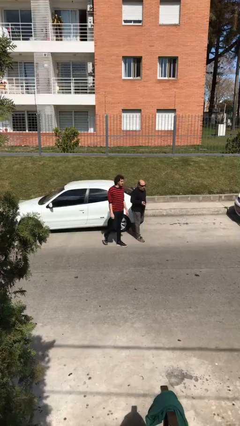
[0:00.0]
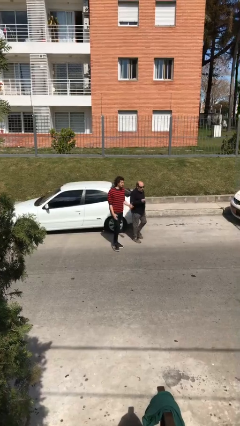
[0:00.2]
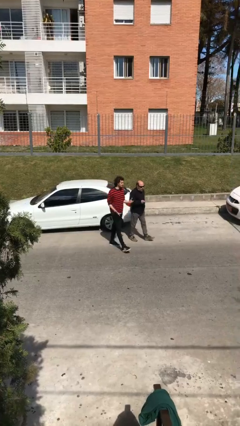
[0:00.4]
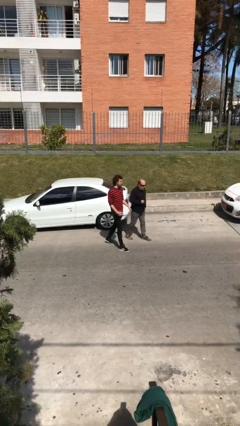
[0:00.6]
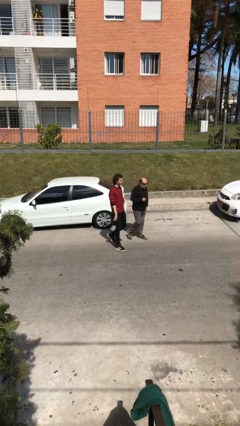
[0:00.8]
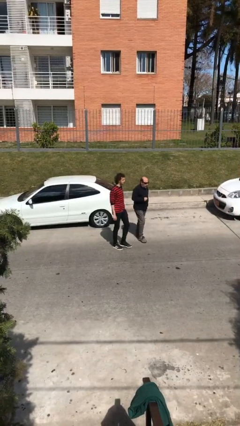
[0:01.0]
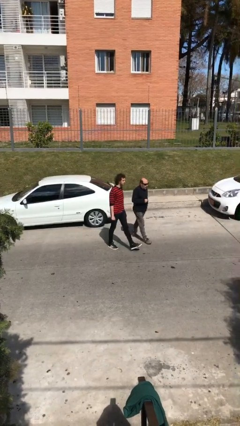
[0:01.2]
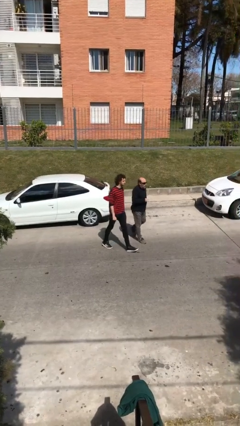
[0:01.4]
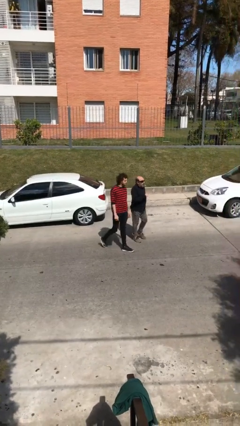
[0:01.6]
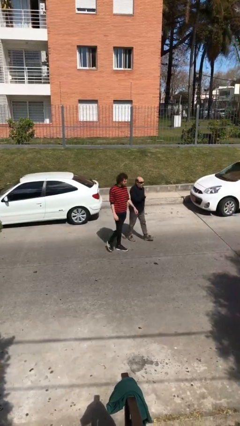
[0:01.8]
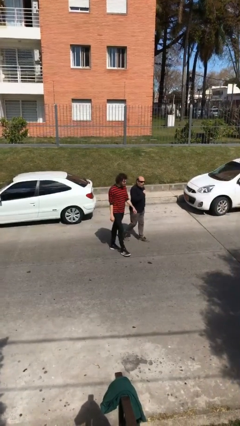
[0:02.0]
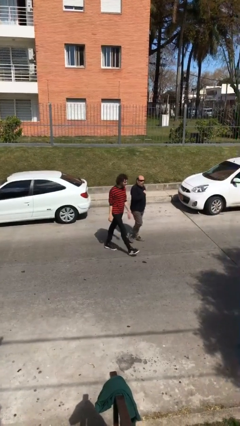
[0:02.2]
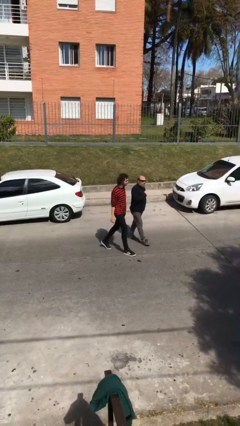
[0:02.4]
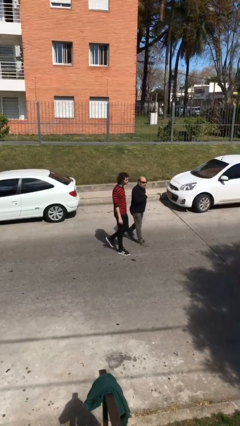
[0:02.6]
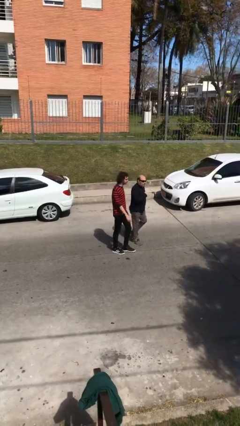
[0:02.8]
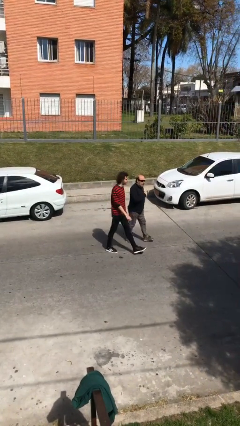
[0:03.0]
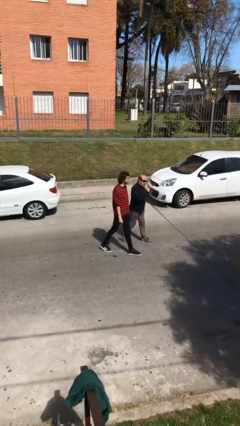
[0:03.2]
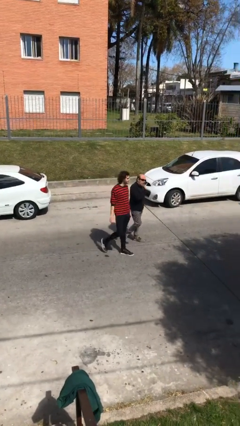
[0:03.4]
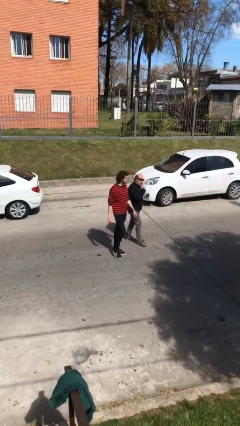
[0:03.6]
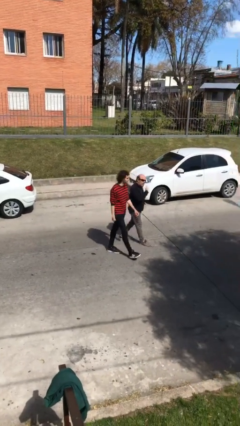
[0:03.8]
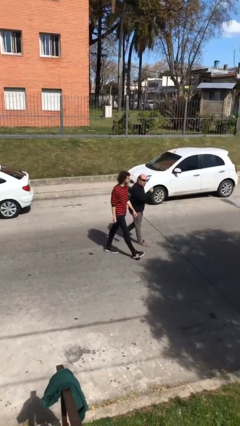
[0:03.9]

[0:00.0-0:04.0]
person talks to person

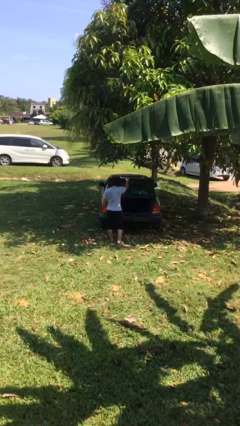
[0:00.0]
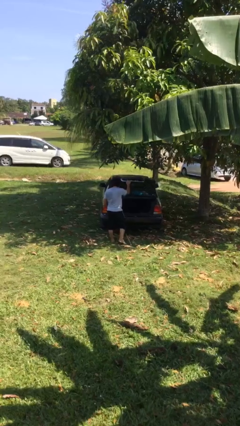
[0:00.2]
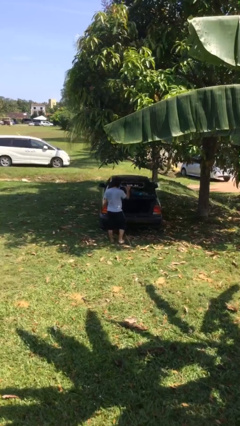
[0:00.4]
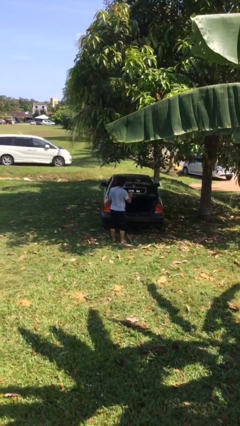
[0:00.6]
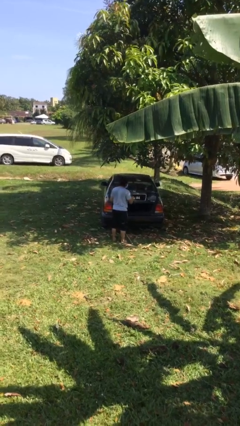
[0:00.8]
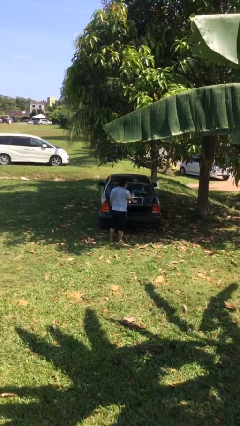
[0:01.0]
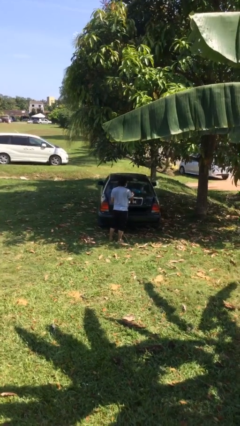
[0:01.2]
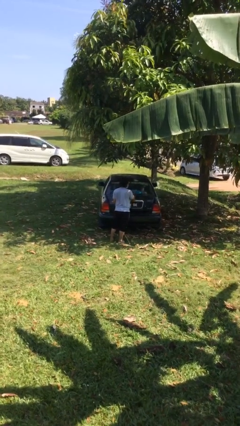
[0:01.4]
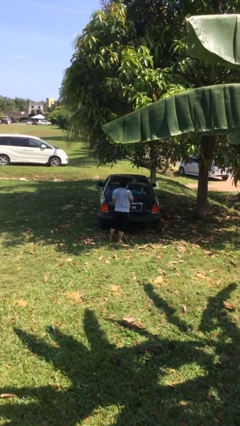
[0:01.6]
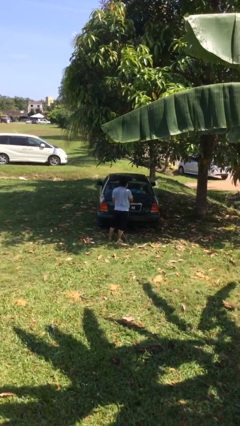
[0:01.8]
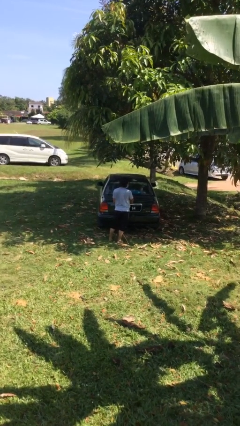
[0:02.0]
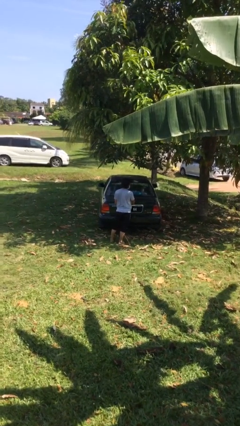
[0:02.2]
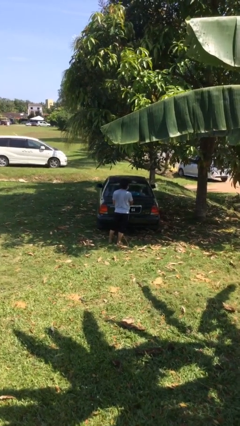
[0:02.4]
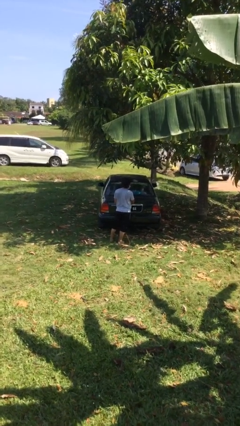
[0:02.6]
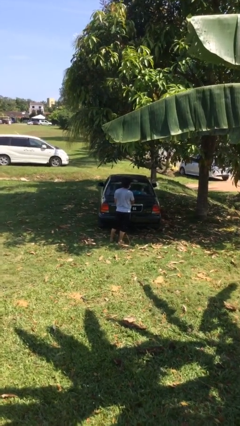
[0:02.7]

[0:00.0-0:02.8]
person closes car trunk

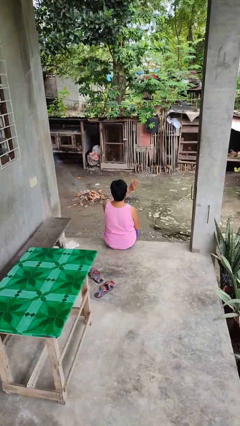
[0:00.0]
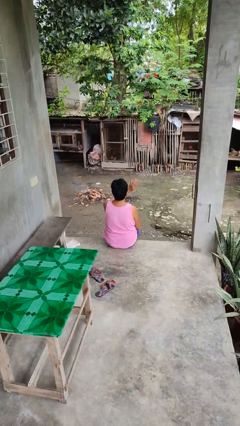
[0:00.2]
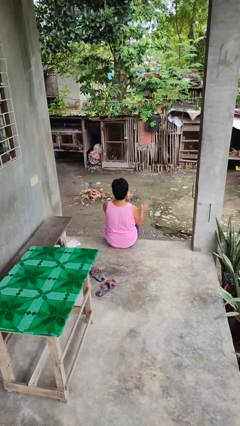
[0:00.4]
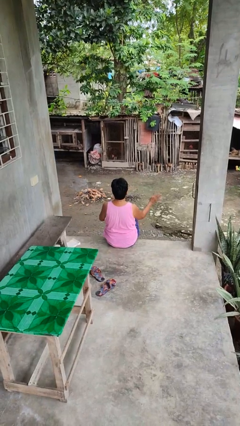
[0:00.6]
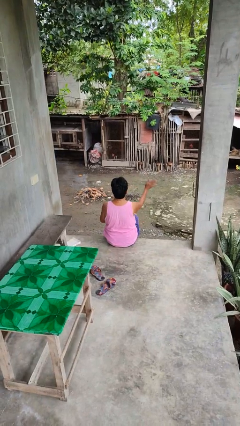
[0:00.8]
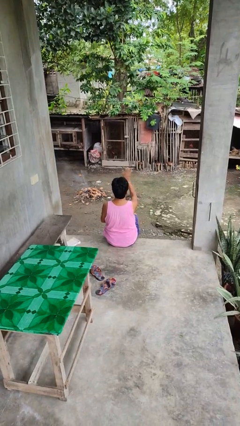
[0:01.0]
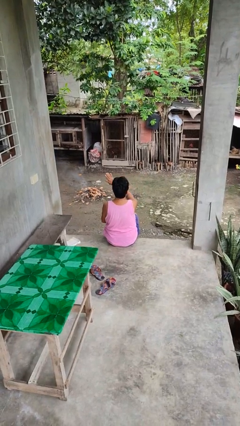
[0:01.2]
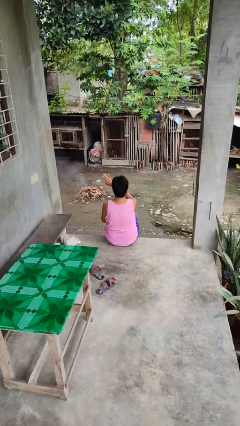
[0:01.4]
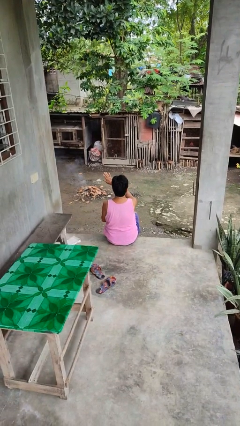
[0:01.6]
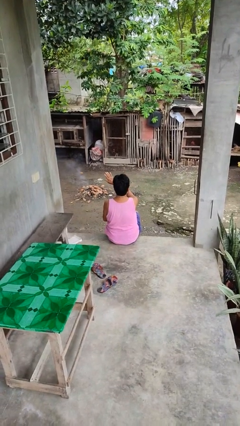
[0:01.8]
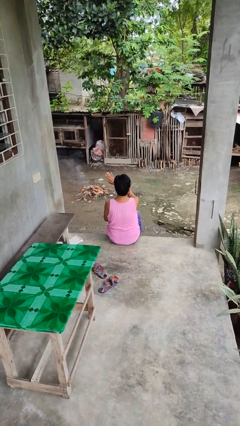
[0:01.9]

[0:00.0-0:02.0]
person gestures swipe left

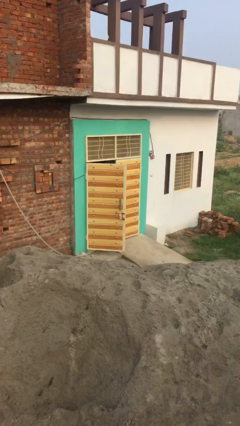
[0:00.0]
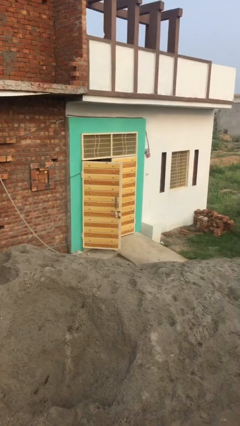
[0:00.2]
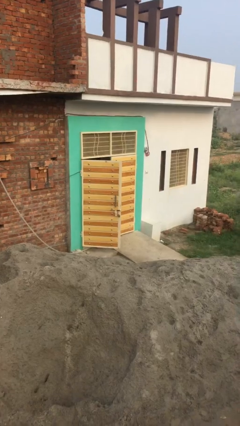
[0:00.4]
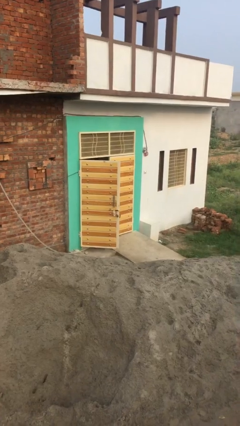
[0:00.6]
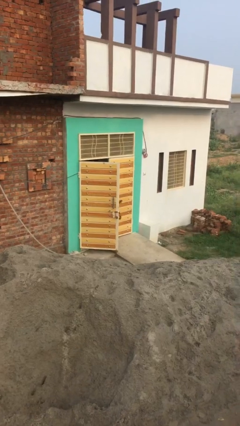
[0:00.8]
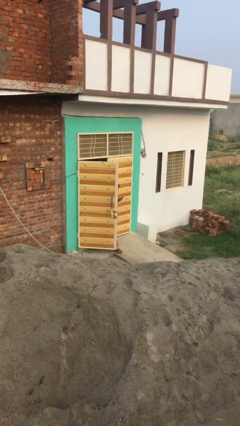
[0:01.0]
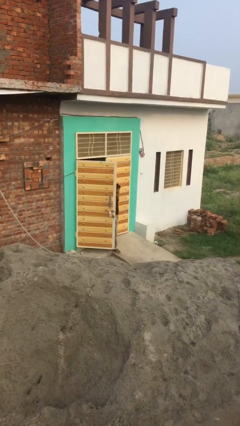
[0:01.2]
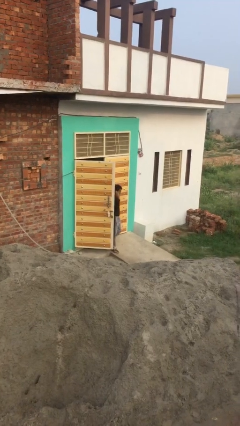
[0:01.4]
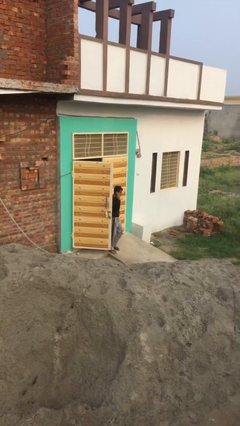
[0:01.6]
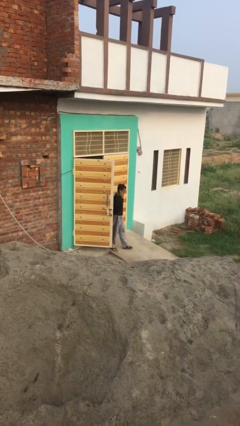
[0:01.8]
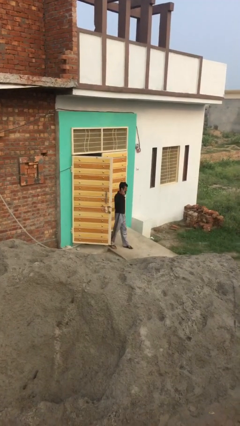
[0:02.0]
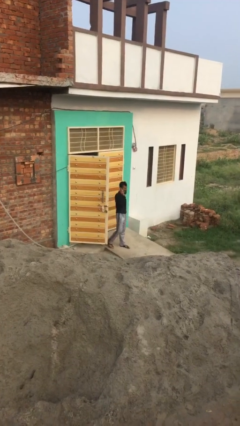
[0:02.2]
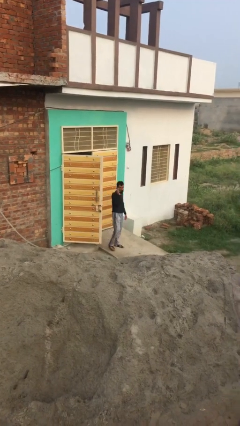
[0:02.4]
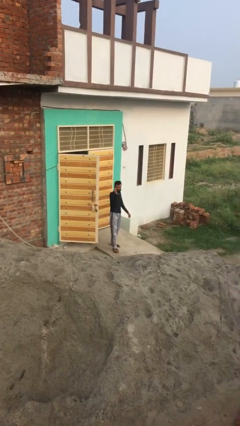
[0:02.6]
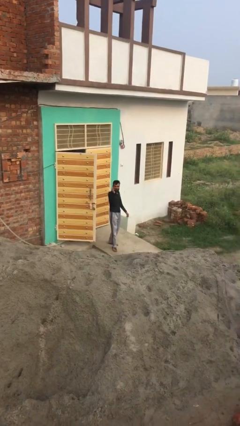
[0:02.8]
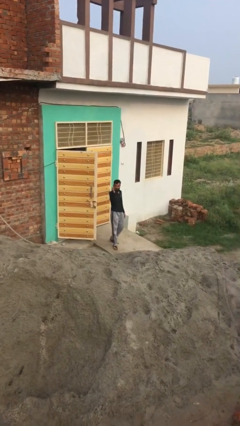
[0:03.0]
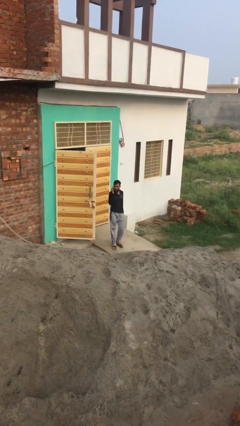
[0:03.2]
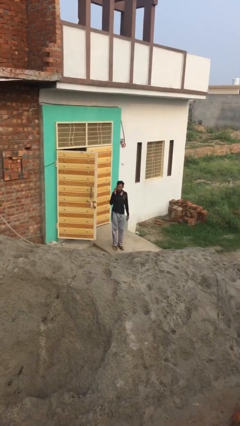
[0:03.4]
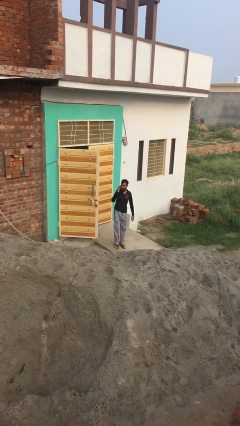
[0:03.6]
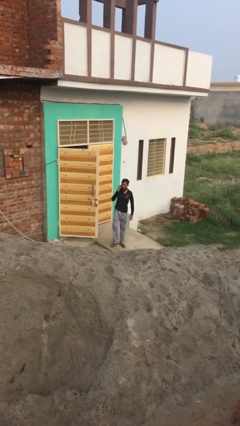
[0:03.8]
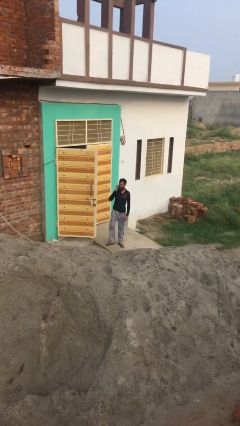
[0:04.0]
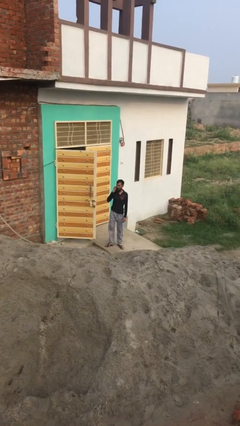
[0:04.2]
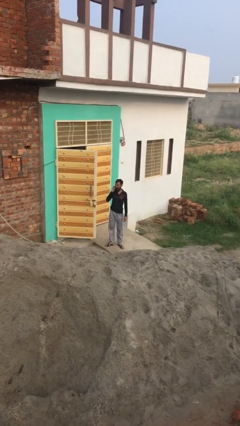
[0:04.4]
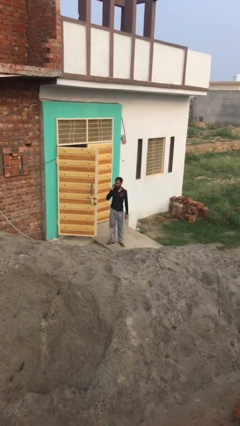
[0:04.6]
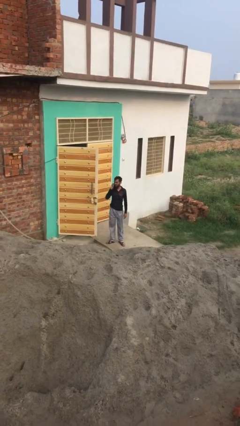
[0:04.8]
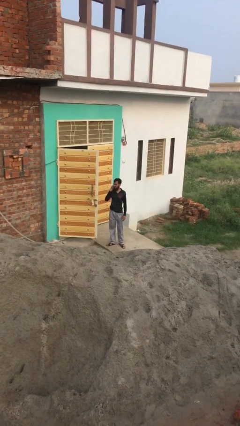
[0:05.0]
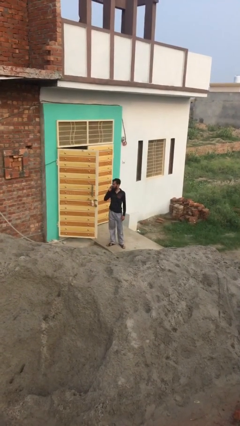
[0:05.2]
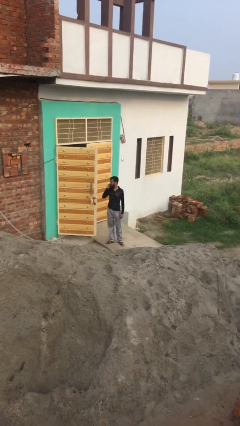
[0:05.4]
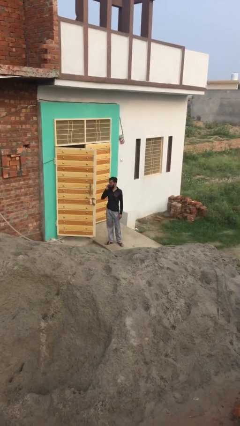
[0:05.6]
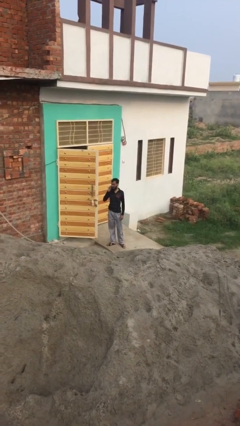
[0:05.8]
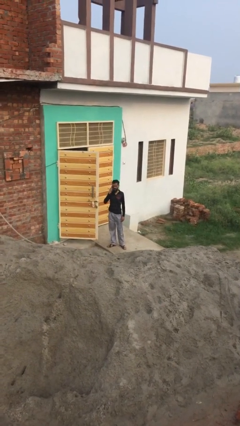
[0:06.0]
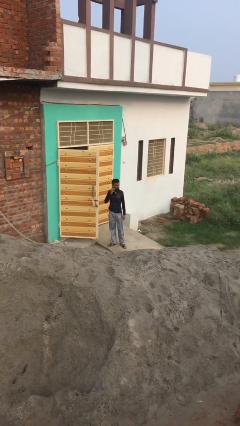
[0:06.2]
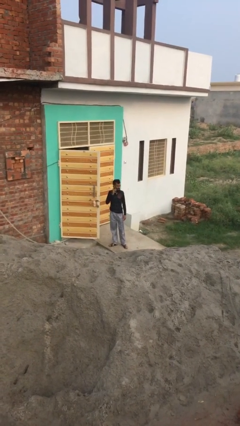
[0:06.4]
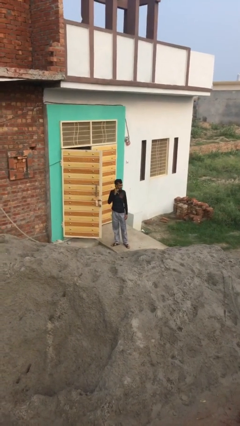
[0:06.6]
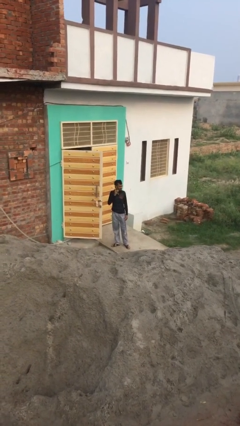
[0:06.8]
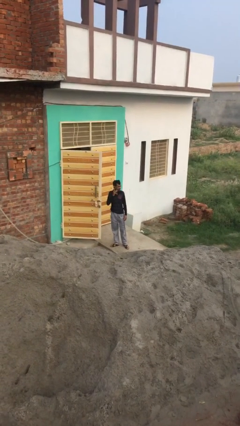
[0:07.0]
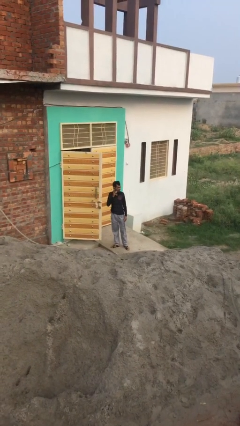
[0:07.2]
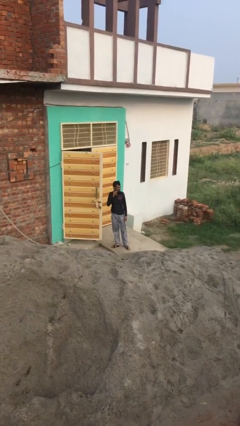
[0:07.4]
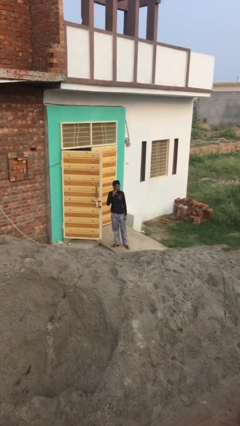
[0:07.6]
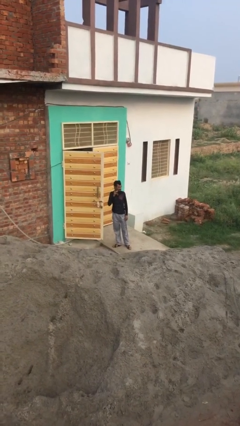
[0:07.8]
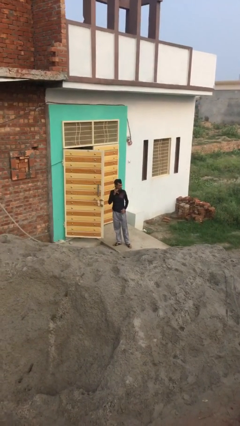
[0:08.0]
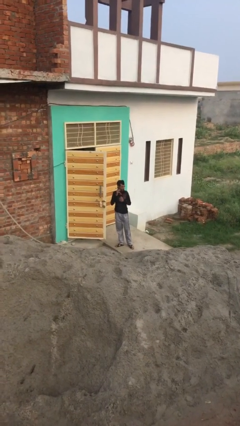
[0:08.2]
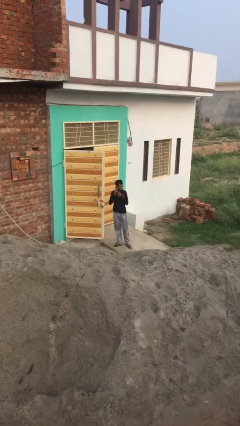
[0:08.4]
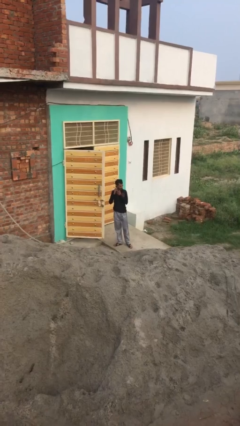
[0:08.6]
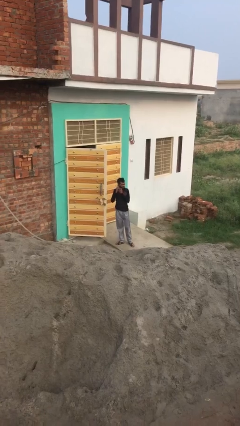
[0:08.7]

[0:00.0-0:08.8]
person enters scene through structure

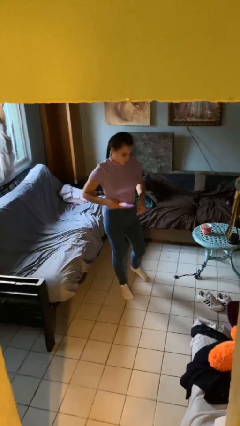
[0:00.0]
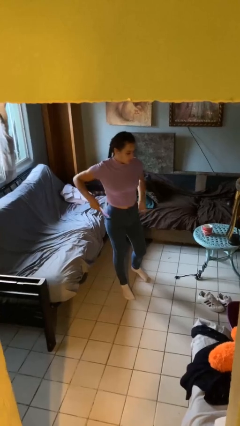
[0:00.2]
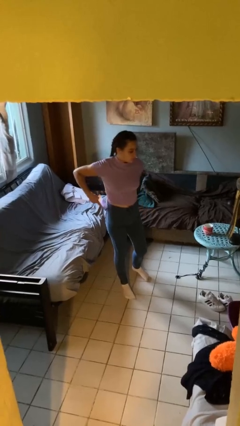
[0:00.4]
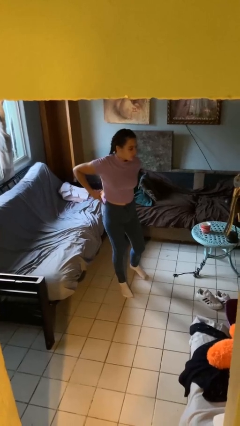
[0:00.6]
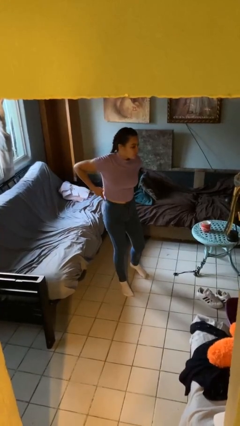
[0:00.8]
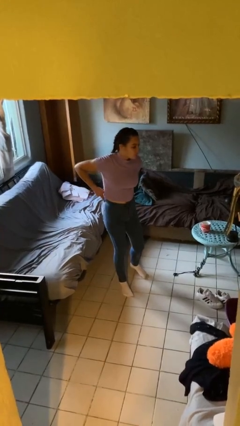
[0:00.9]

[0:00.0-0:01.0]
person puts phone into pocket
